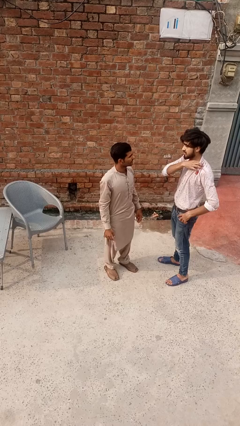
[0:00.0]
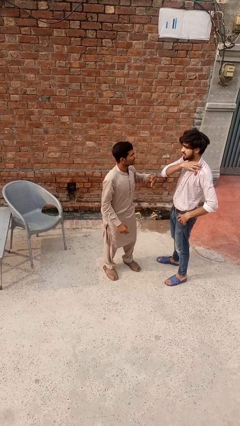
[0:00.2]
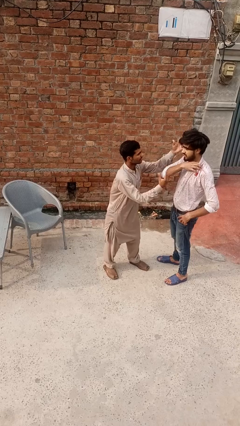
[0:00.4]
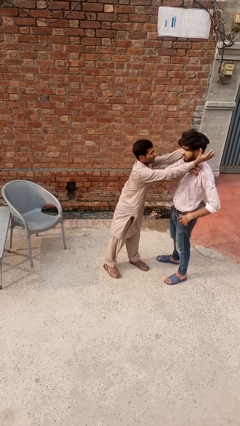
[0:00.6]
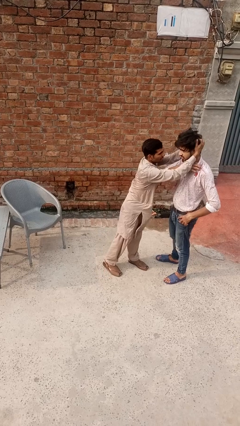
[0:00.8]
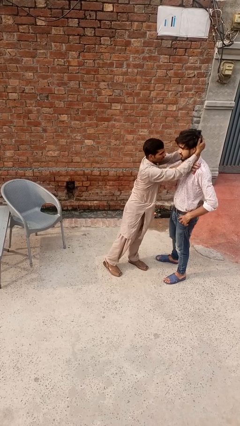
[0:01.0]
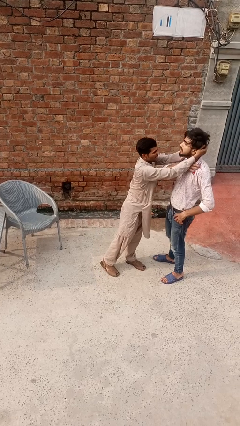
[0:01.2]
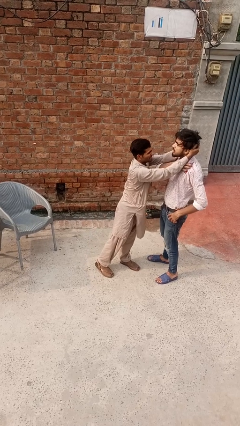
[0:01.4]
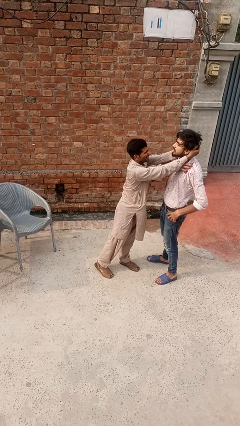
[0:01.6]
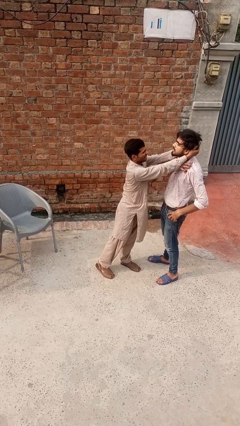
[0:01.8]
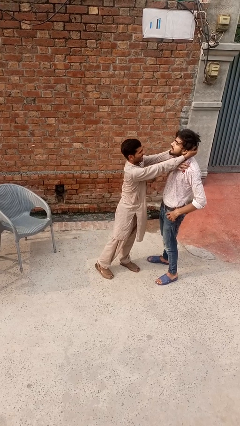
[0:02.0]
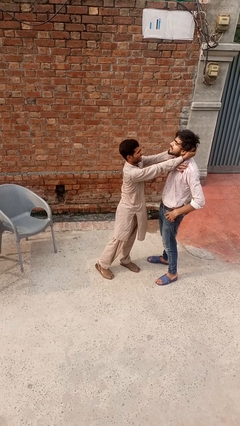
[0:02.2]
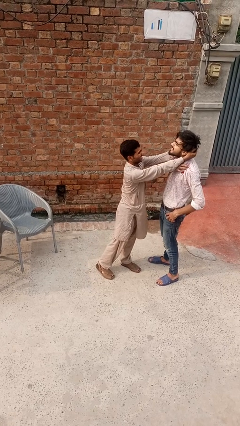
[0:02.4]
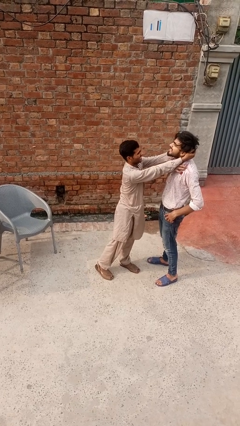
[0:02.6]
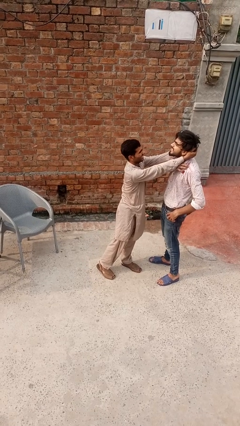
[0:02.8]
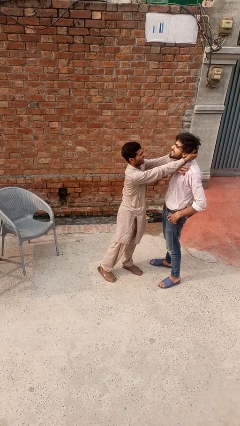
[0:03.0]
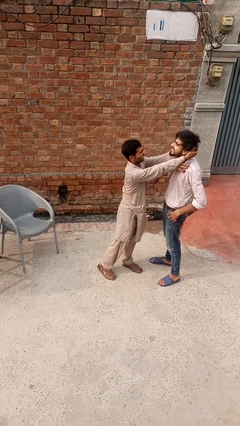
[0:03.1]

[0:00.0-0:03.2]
person grabs person by hair

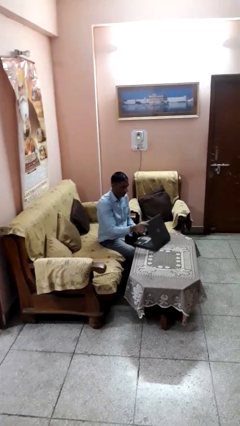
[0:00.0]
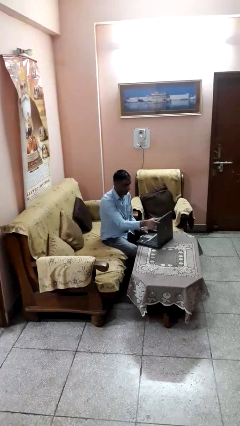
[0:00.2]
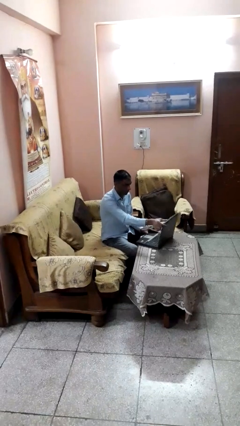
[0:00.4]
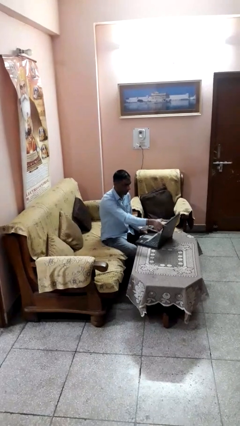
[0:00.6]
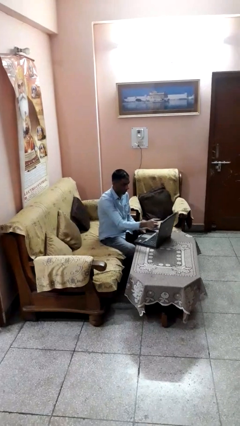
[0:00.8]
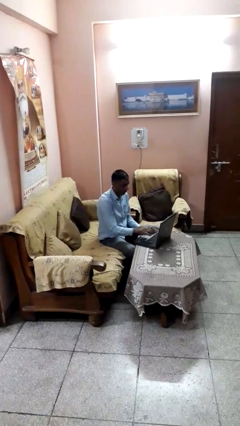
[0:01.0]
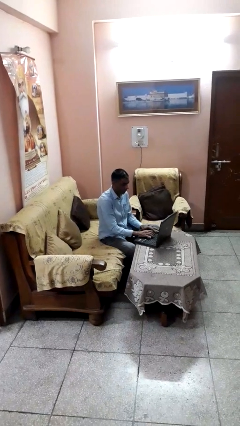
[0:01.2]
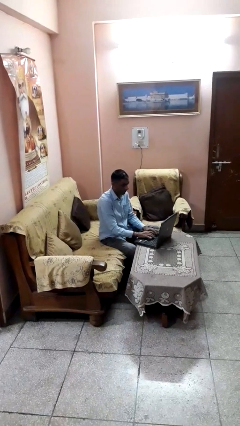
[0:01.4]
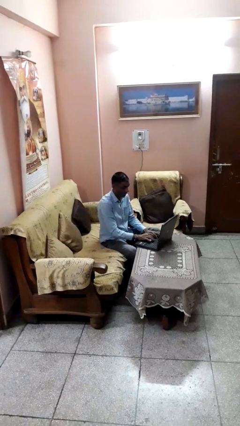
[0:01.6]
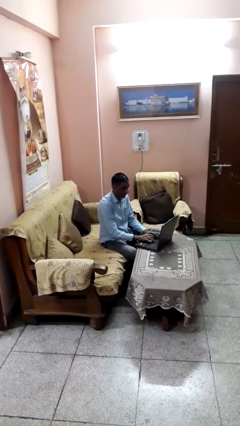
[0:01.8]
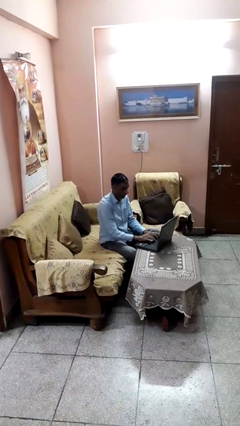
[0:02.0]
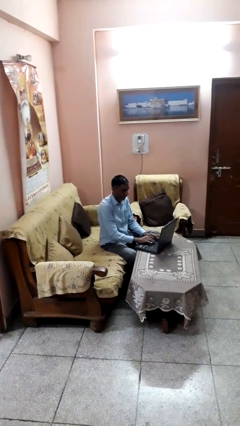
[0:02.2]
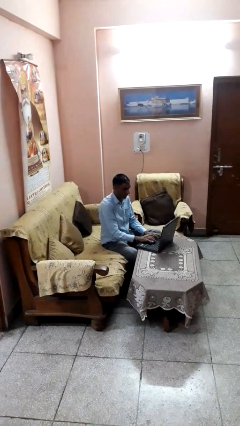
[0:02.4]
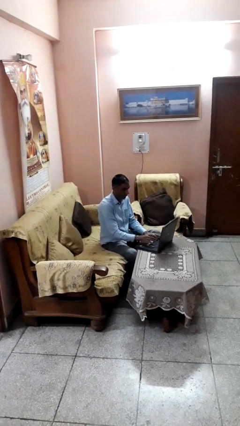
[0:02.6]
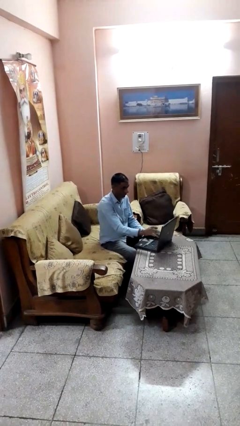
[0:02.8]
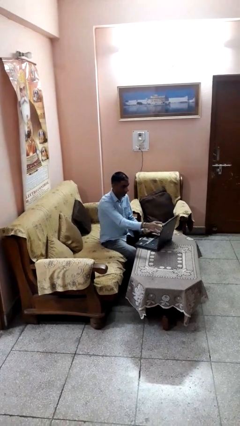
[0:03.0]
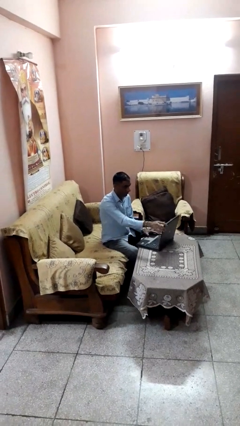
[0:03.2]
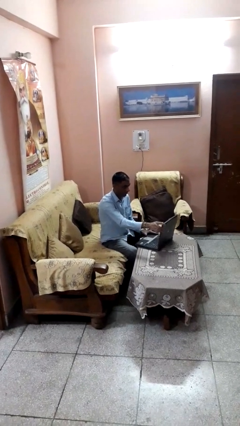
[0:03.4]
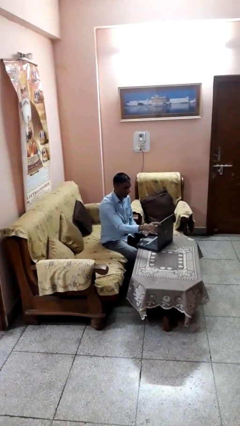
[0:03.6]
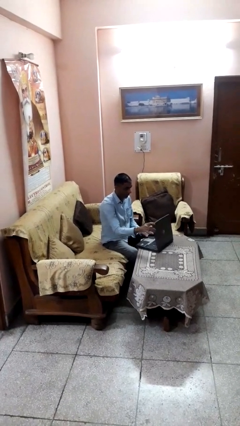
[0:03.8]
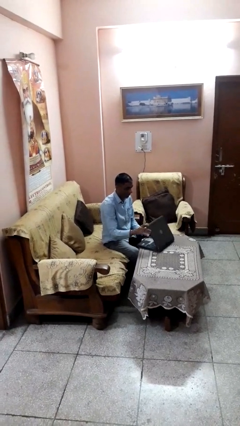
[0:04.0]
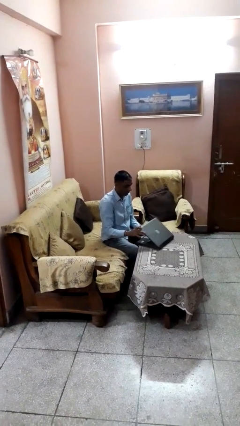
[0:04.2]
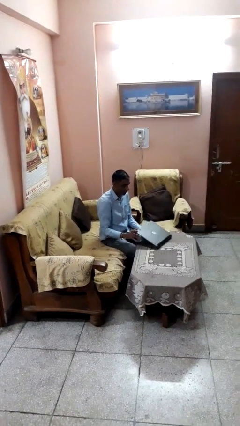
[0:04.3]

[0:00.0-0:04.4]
person interacts with laptop

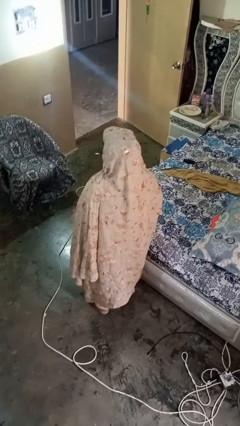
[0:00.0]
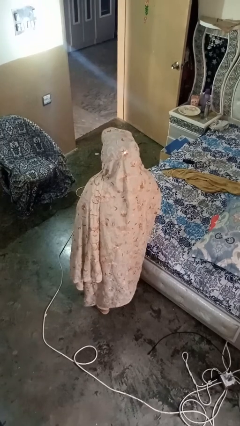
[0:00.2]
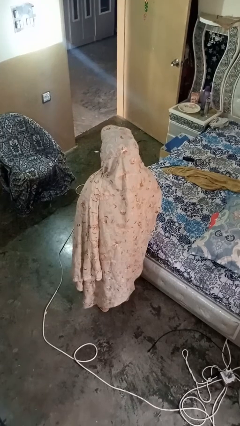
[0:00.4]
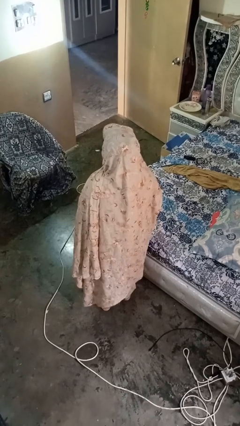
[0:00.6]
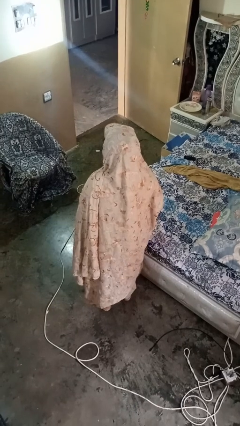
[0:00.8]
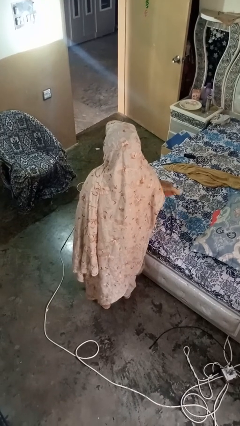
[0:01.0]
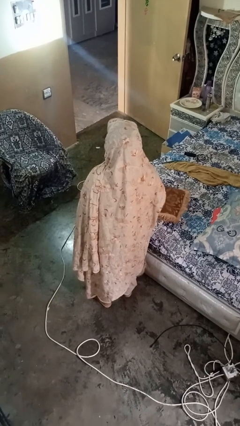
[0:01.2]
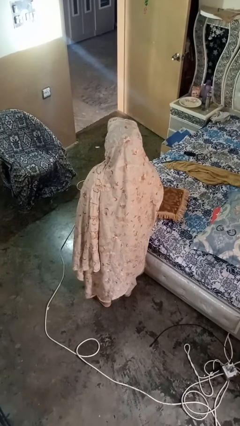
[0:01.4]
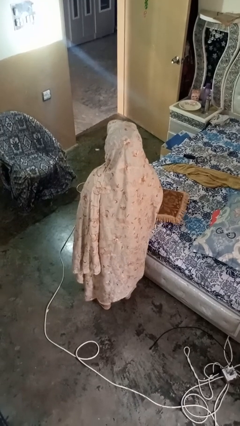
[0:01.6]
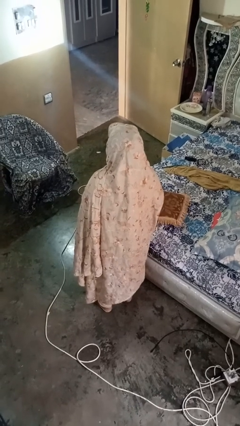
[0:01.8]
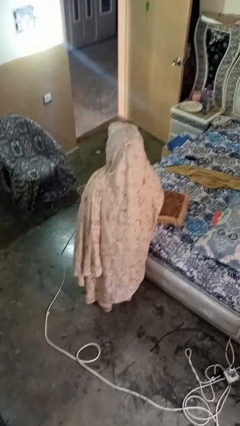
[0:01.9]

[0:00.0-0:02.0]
person puts down object on bed

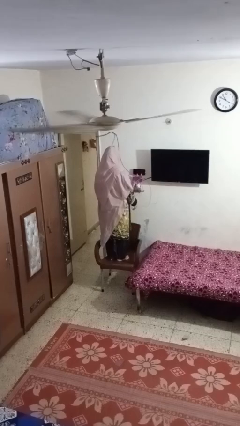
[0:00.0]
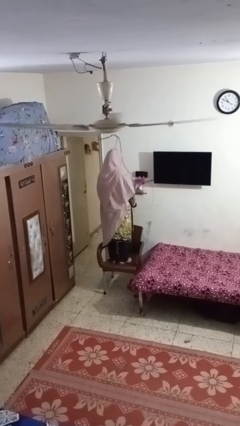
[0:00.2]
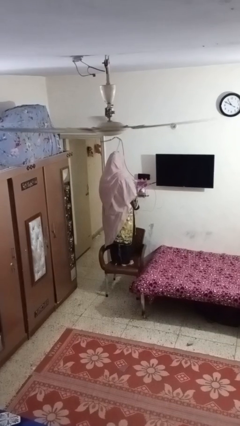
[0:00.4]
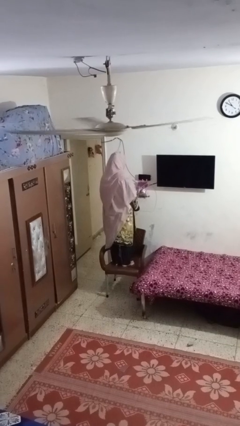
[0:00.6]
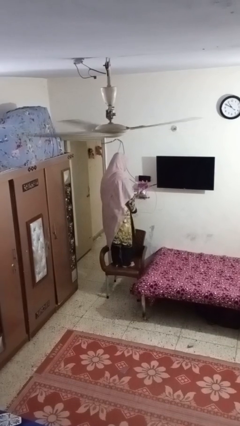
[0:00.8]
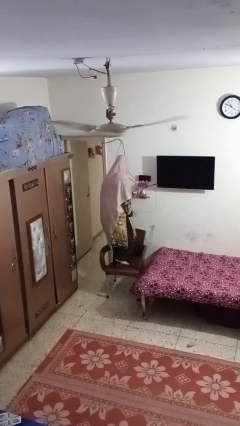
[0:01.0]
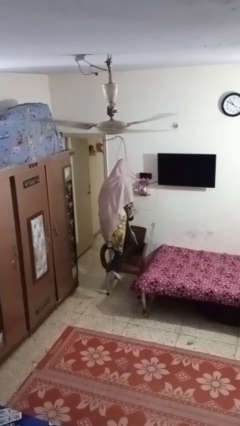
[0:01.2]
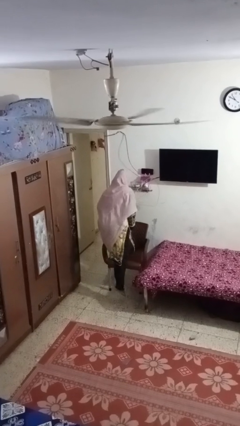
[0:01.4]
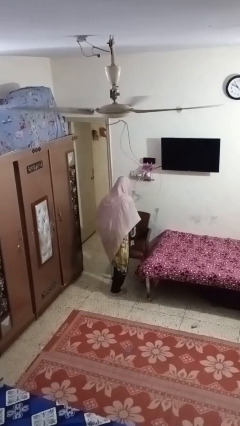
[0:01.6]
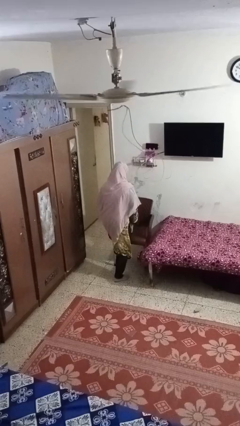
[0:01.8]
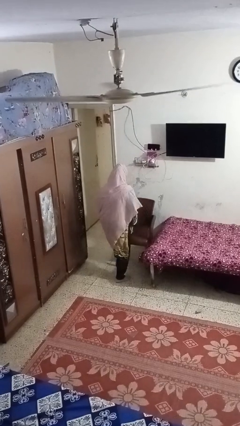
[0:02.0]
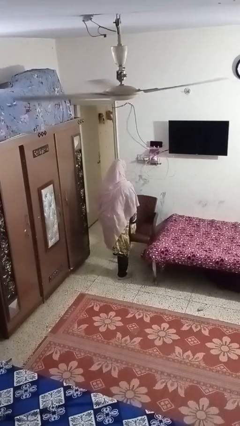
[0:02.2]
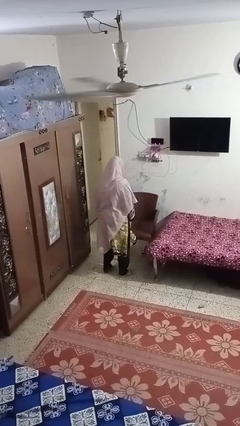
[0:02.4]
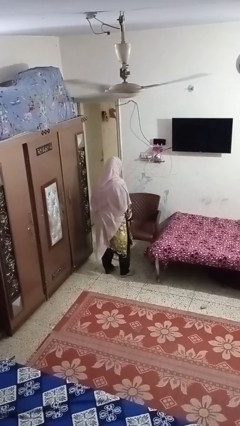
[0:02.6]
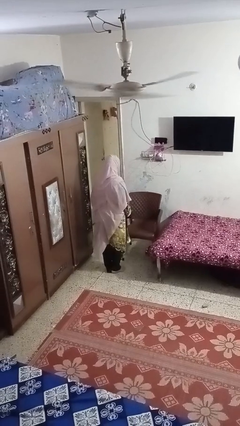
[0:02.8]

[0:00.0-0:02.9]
person climbs off chair

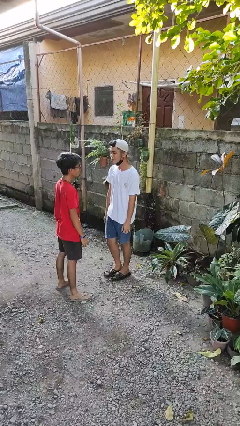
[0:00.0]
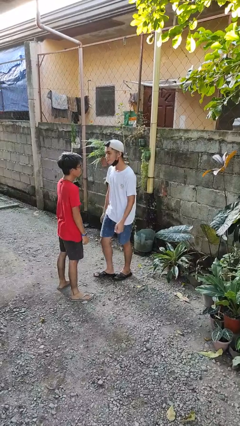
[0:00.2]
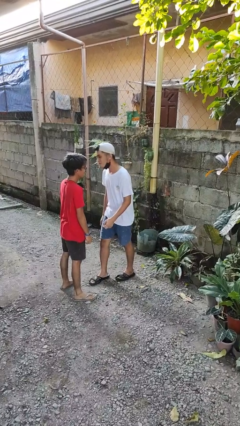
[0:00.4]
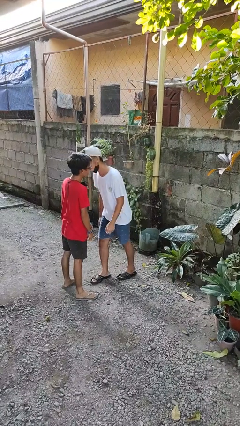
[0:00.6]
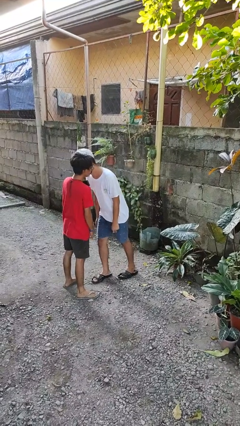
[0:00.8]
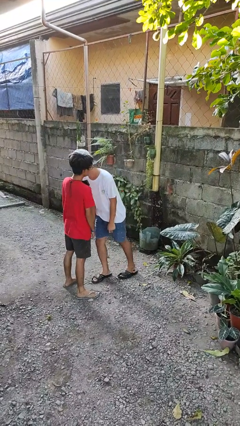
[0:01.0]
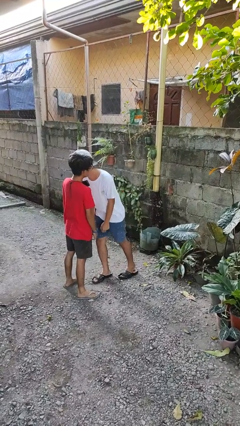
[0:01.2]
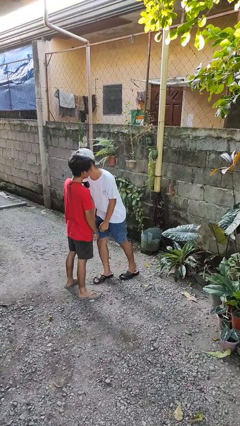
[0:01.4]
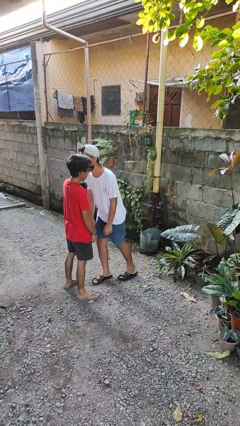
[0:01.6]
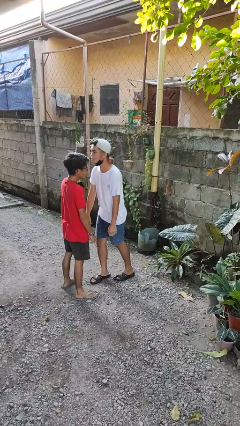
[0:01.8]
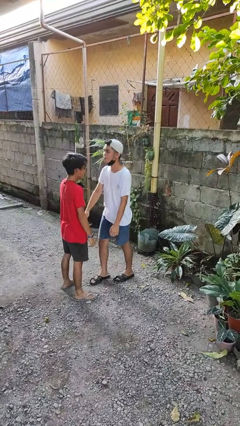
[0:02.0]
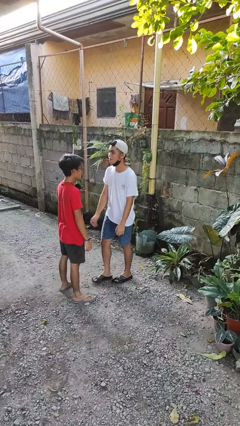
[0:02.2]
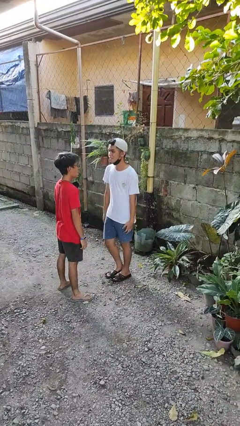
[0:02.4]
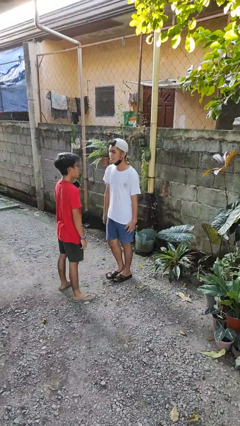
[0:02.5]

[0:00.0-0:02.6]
person kisses cheek of person

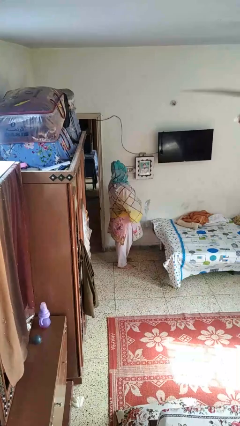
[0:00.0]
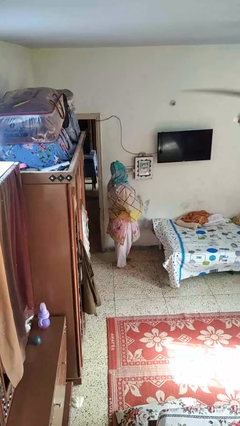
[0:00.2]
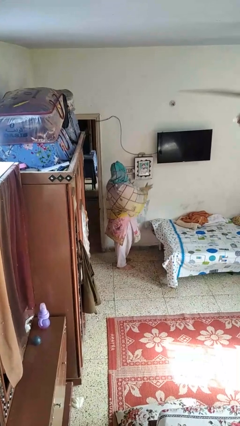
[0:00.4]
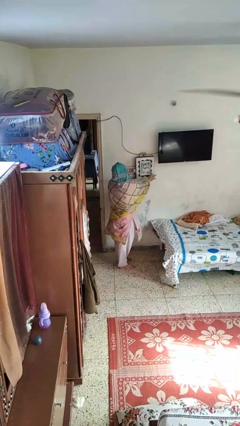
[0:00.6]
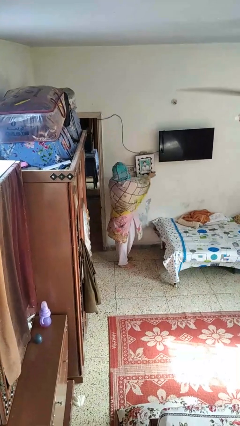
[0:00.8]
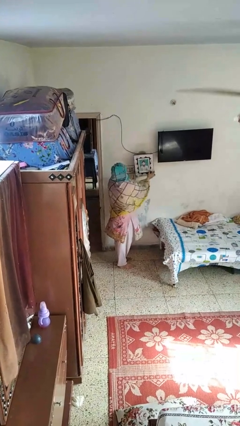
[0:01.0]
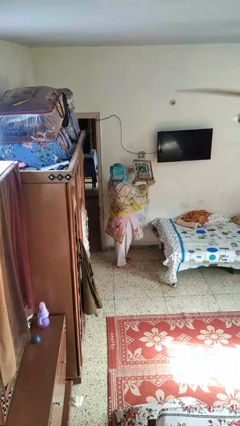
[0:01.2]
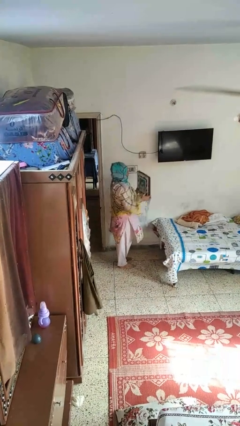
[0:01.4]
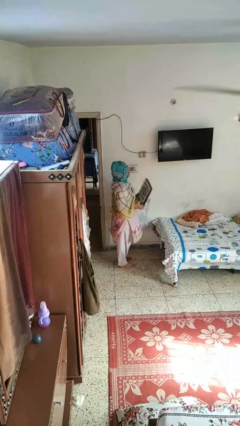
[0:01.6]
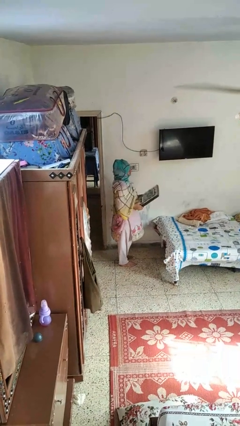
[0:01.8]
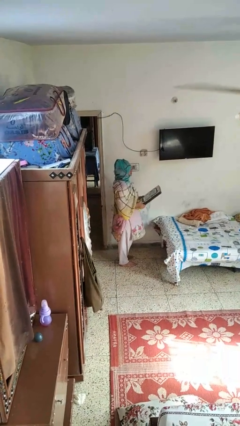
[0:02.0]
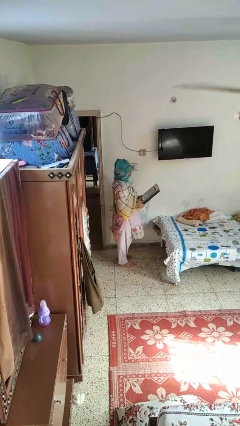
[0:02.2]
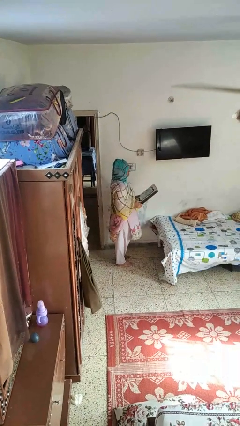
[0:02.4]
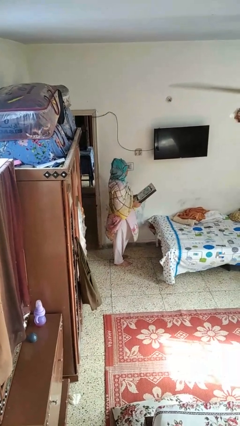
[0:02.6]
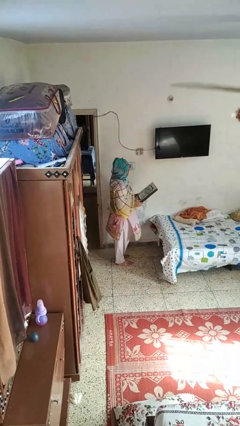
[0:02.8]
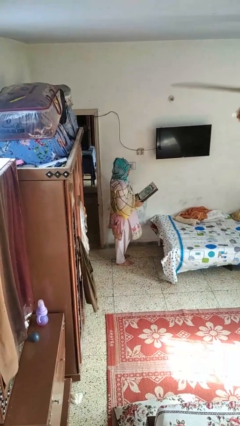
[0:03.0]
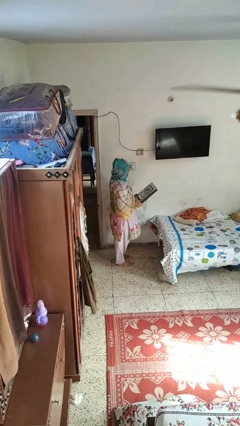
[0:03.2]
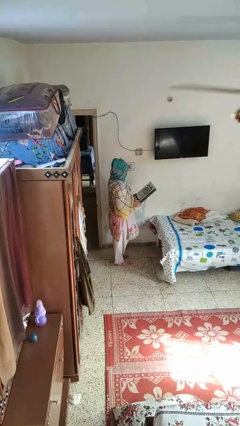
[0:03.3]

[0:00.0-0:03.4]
person takes down picture frame
